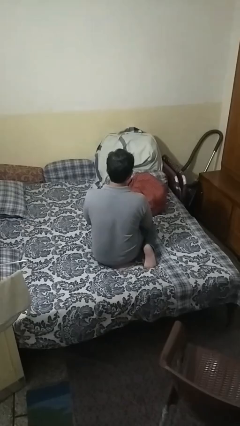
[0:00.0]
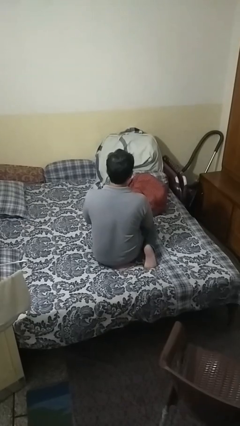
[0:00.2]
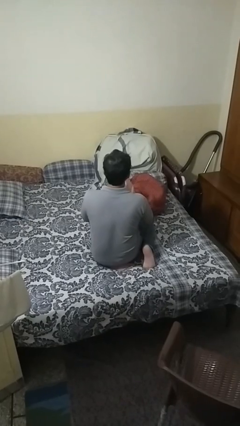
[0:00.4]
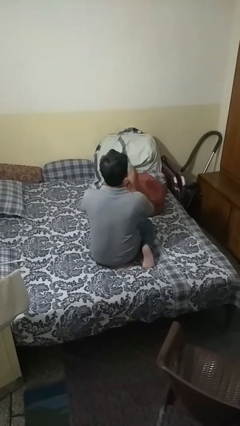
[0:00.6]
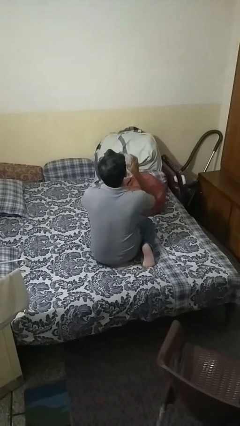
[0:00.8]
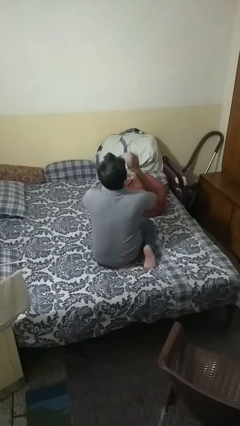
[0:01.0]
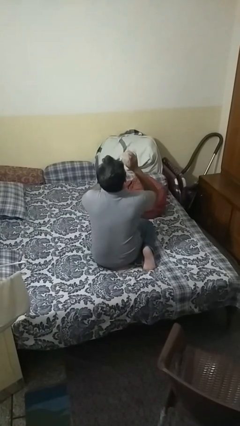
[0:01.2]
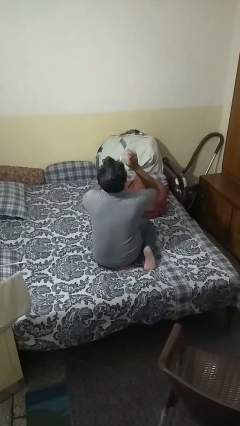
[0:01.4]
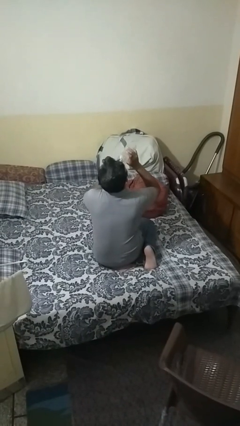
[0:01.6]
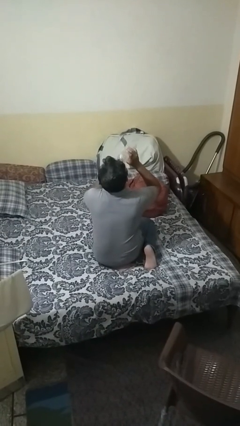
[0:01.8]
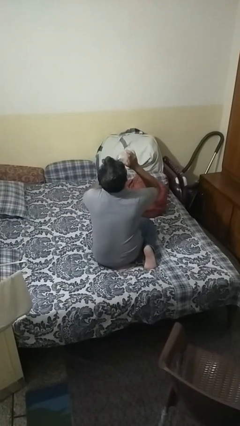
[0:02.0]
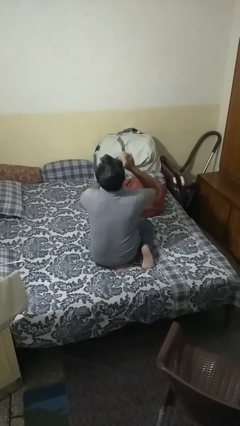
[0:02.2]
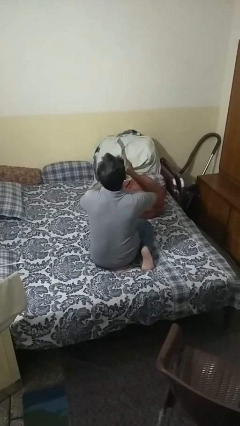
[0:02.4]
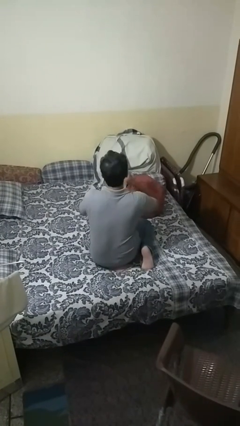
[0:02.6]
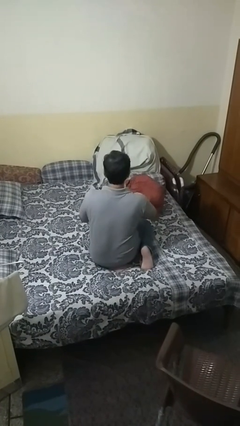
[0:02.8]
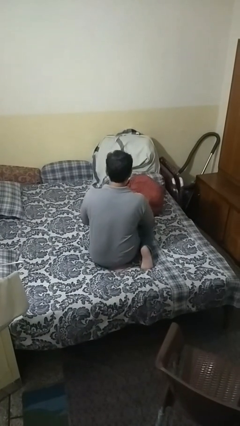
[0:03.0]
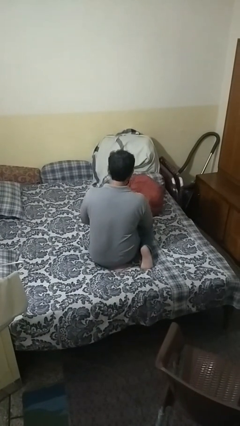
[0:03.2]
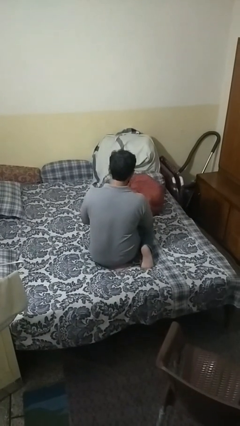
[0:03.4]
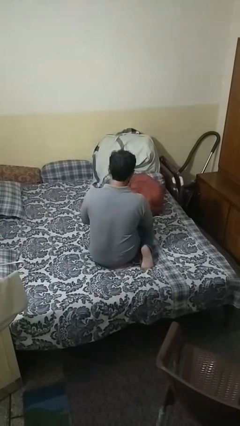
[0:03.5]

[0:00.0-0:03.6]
person drinks from bottle

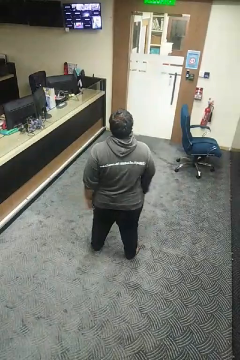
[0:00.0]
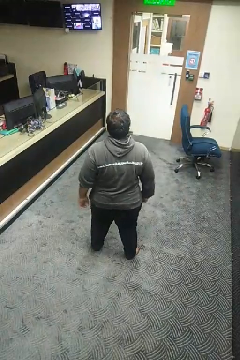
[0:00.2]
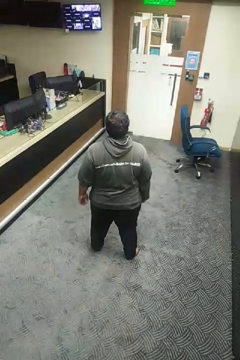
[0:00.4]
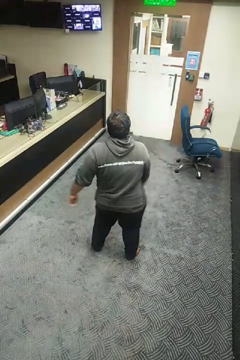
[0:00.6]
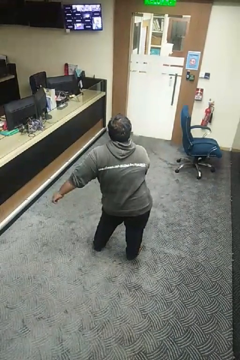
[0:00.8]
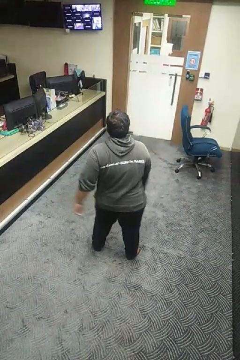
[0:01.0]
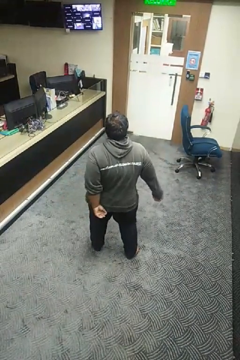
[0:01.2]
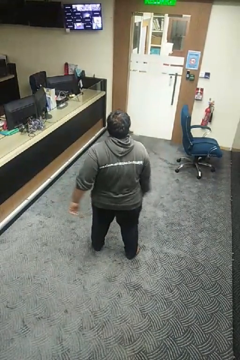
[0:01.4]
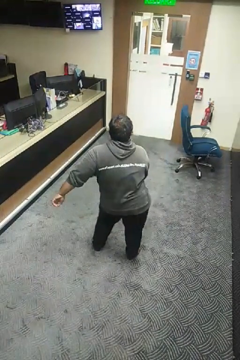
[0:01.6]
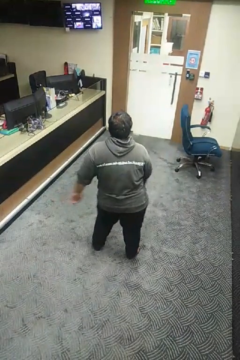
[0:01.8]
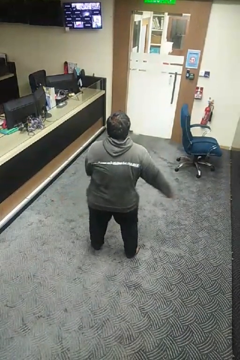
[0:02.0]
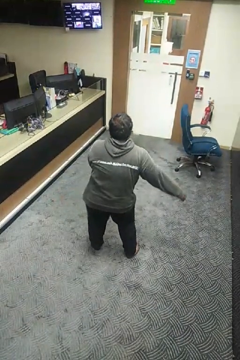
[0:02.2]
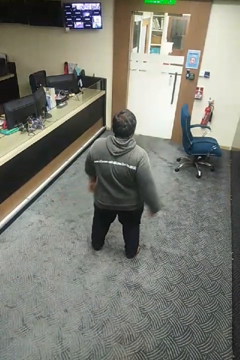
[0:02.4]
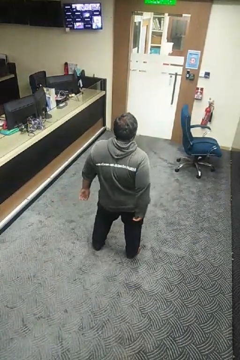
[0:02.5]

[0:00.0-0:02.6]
person dances in place

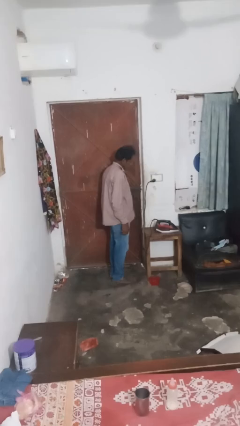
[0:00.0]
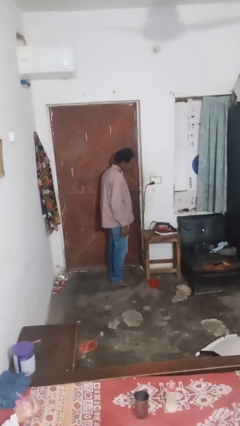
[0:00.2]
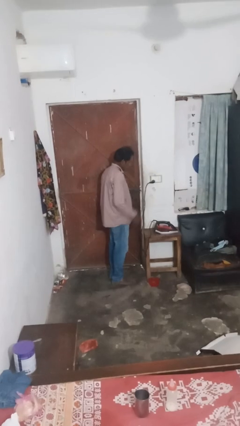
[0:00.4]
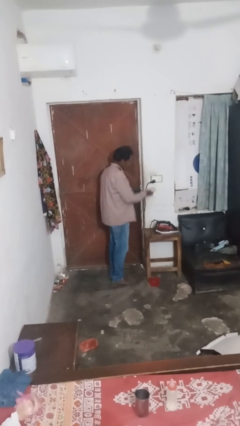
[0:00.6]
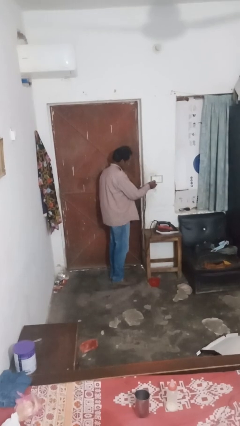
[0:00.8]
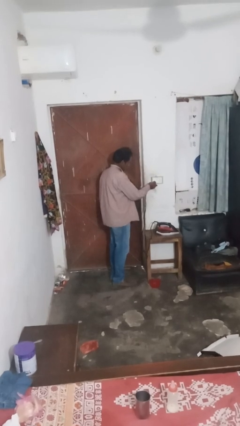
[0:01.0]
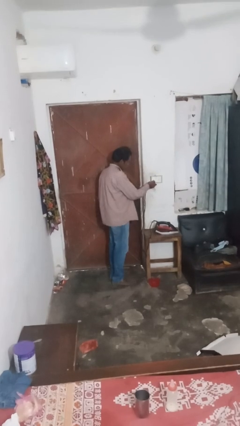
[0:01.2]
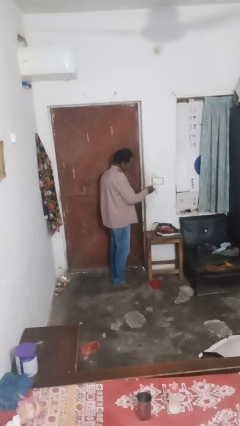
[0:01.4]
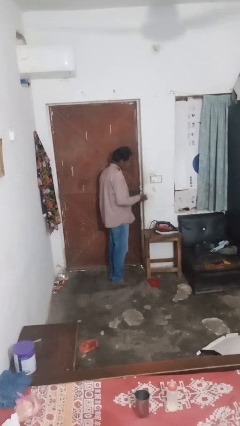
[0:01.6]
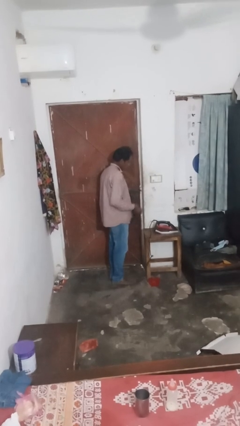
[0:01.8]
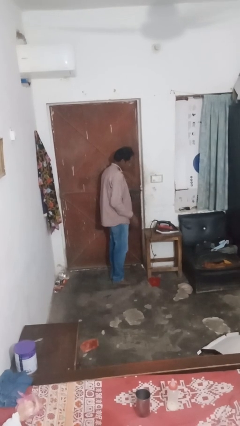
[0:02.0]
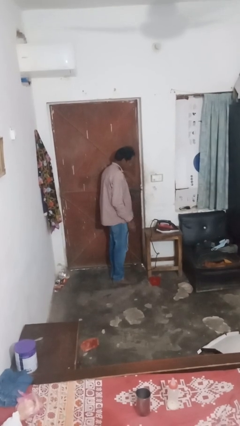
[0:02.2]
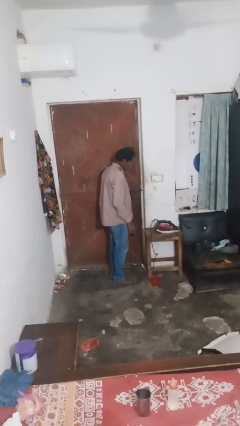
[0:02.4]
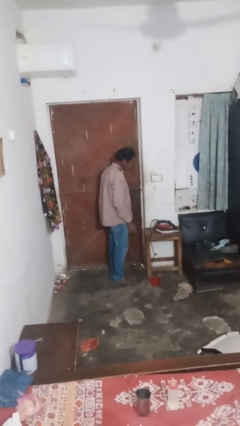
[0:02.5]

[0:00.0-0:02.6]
person unplugs from electrical socket

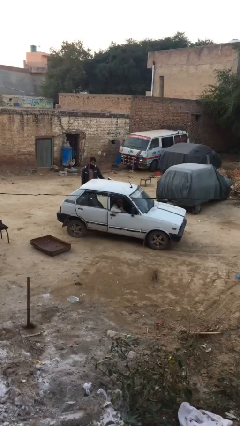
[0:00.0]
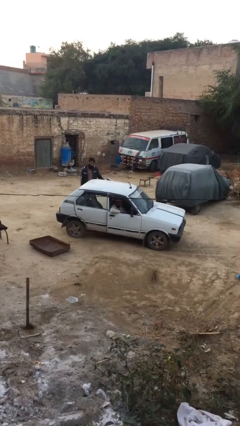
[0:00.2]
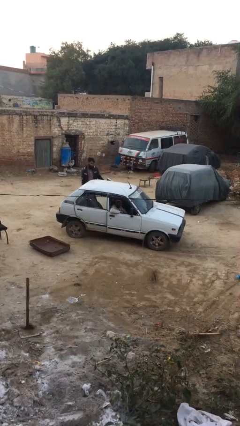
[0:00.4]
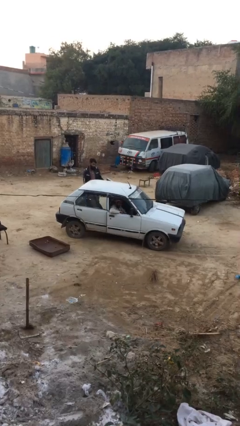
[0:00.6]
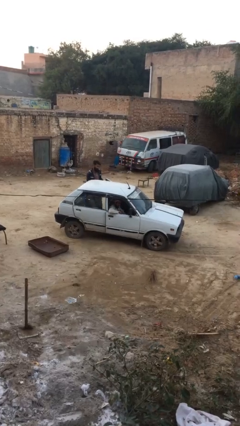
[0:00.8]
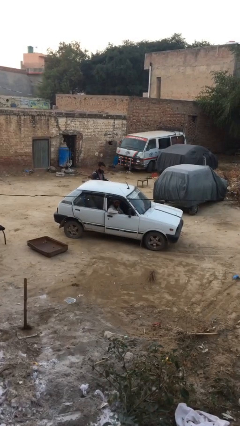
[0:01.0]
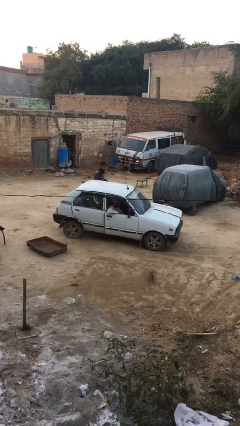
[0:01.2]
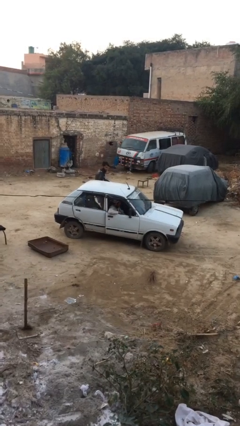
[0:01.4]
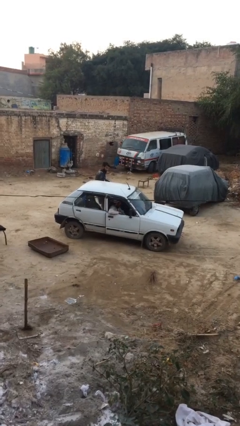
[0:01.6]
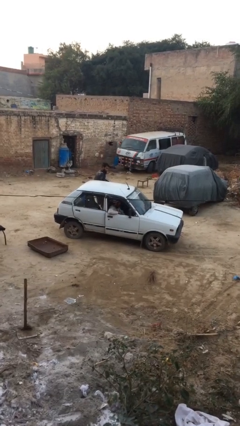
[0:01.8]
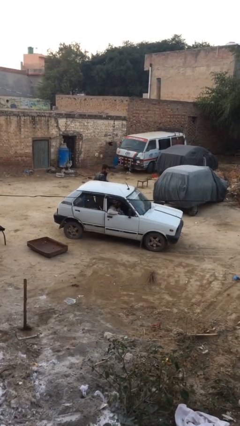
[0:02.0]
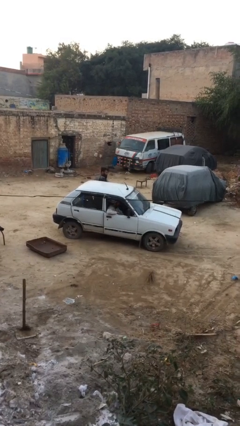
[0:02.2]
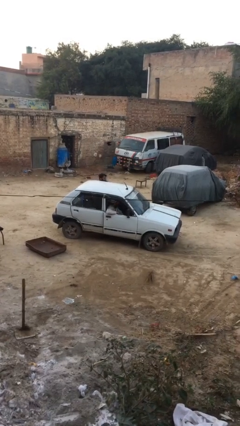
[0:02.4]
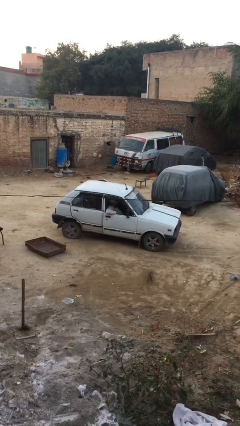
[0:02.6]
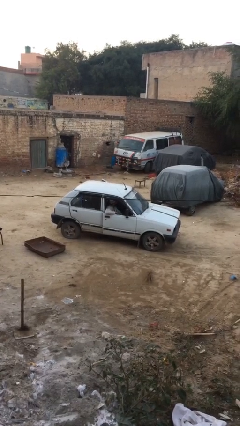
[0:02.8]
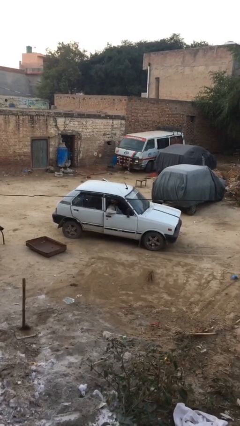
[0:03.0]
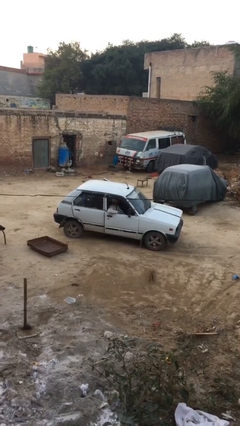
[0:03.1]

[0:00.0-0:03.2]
car picks up person

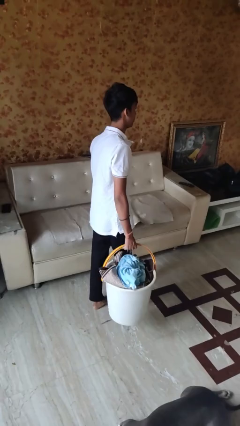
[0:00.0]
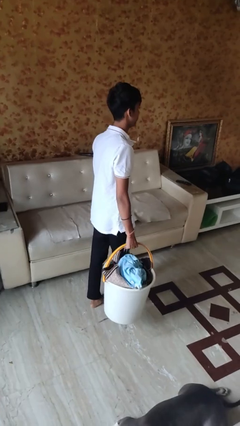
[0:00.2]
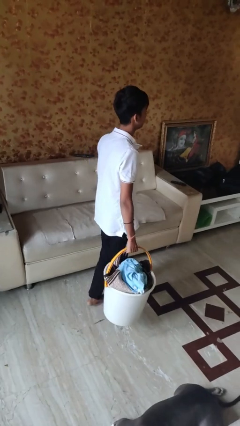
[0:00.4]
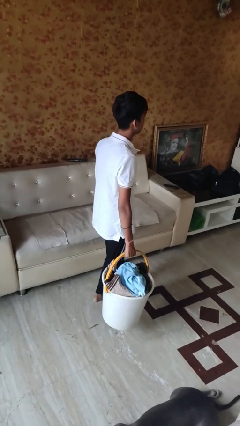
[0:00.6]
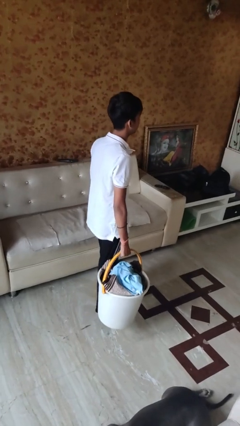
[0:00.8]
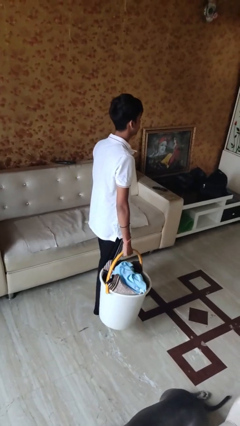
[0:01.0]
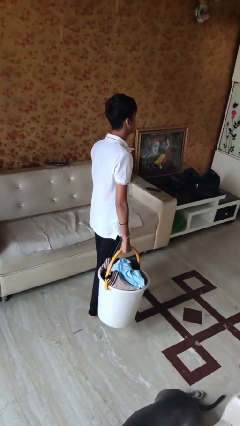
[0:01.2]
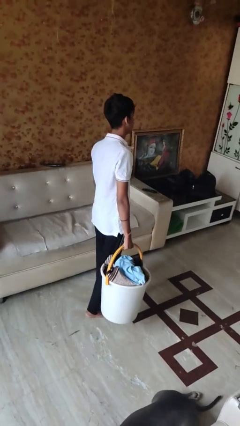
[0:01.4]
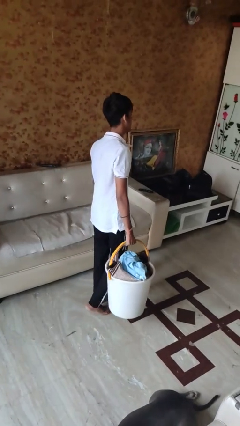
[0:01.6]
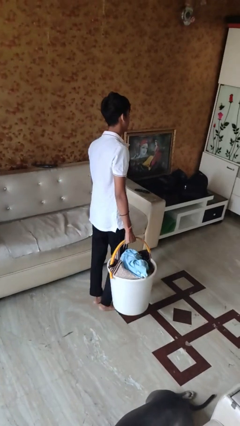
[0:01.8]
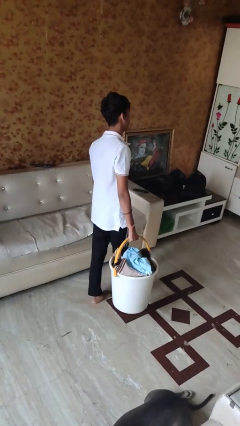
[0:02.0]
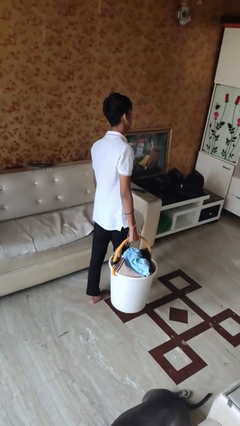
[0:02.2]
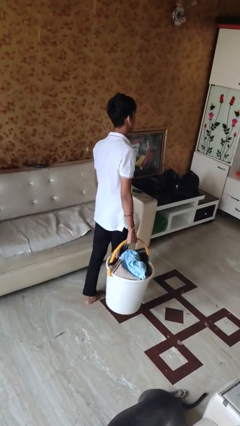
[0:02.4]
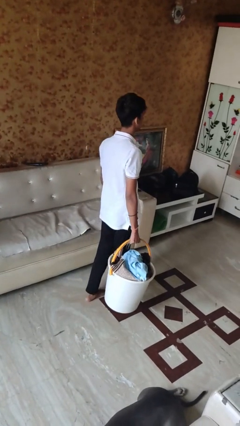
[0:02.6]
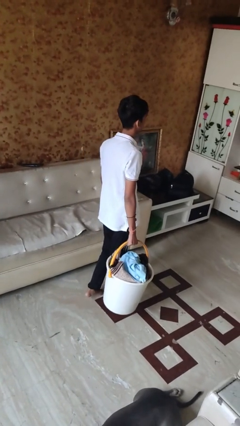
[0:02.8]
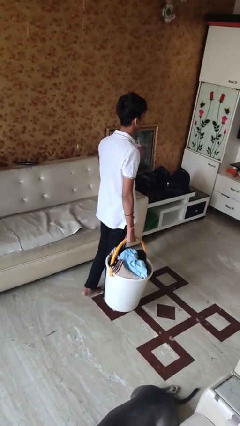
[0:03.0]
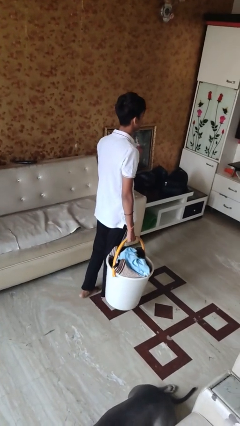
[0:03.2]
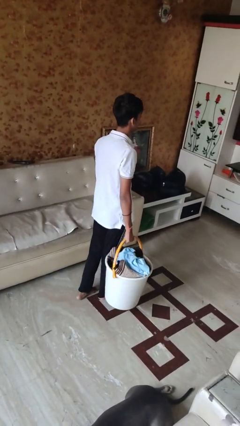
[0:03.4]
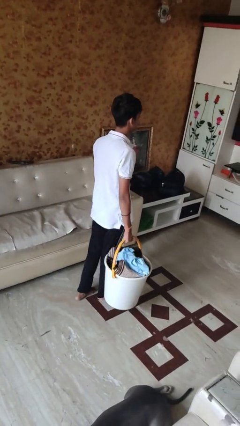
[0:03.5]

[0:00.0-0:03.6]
person carries laundry basket

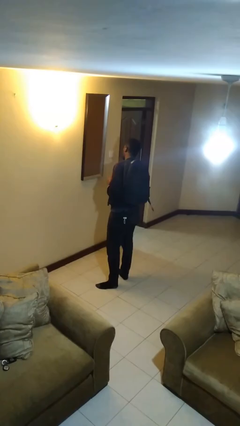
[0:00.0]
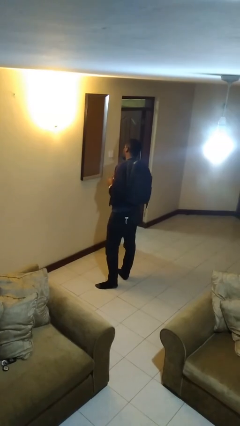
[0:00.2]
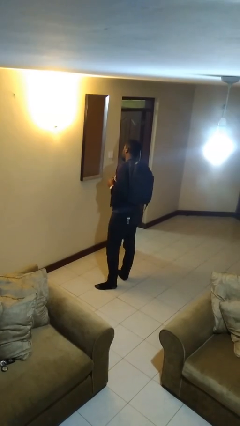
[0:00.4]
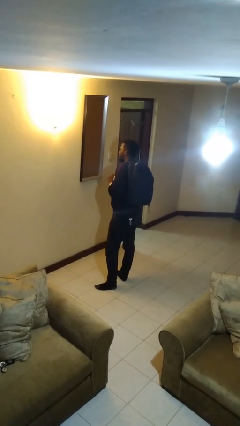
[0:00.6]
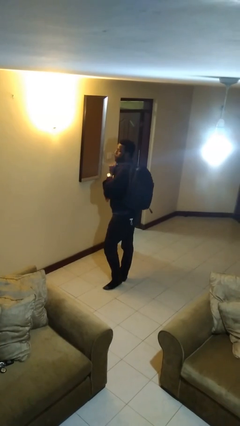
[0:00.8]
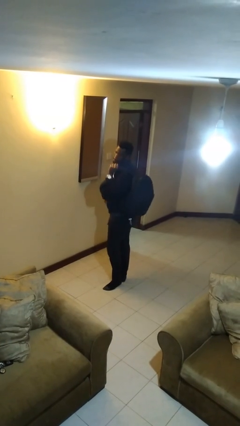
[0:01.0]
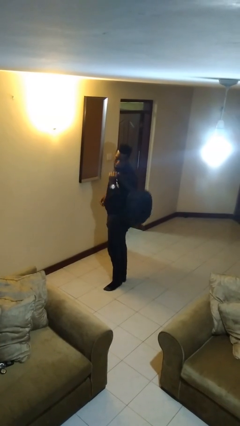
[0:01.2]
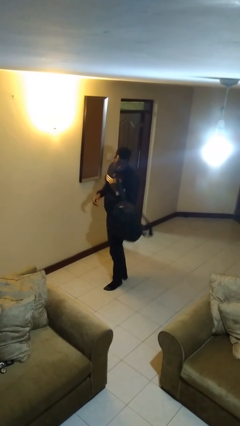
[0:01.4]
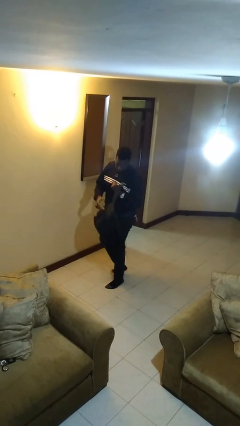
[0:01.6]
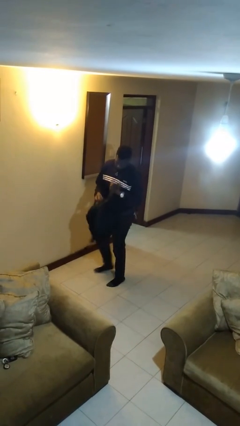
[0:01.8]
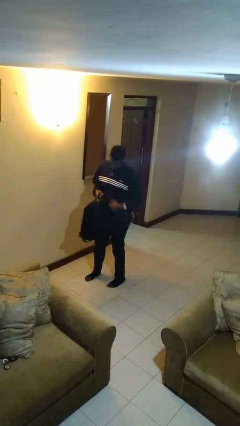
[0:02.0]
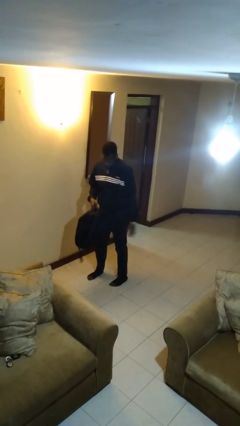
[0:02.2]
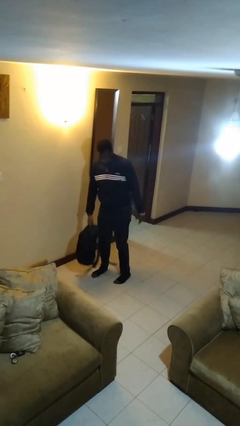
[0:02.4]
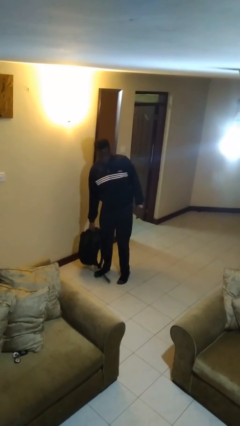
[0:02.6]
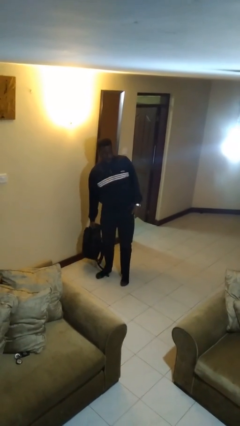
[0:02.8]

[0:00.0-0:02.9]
person takes off backpack
